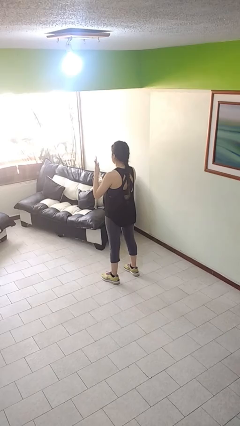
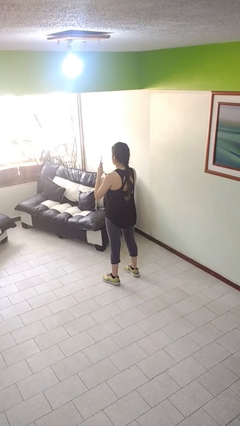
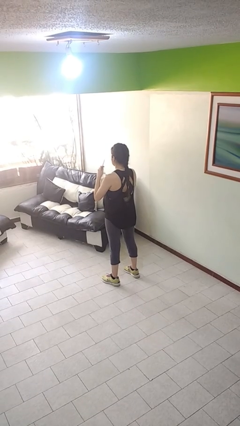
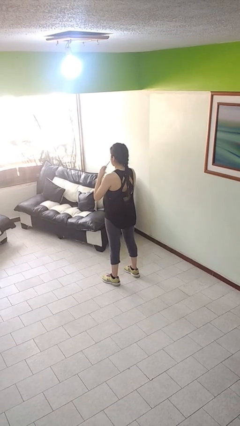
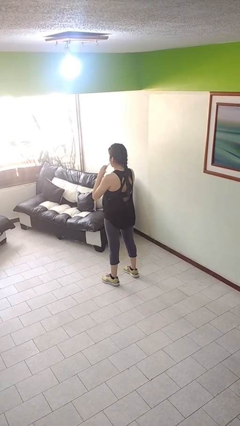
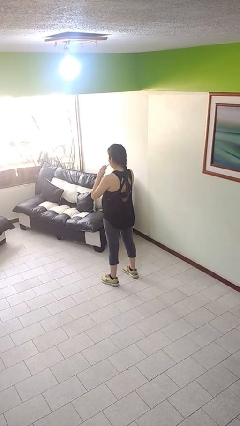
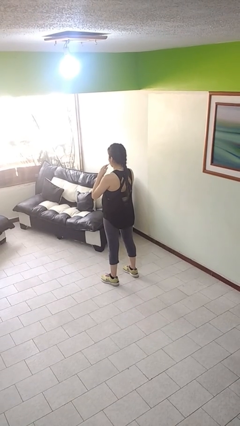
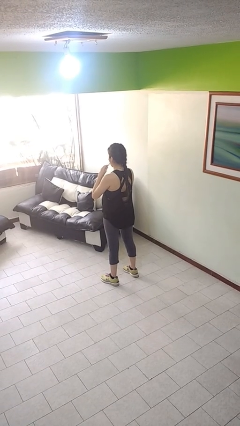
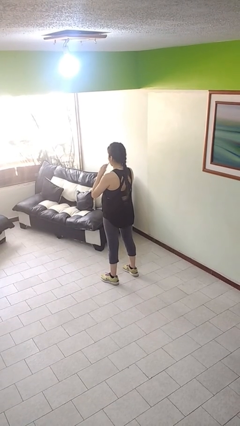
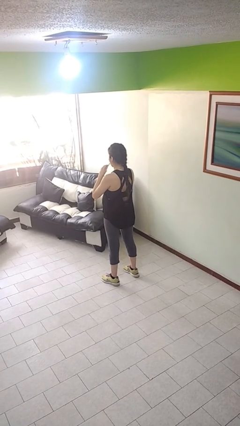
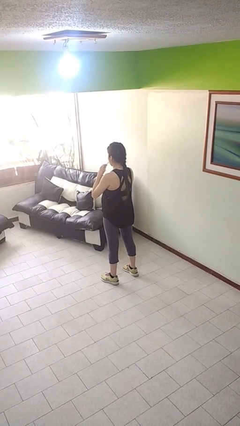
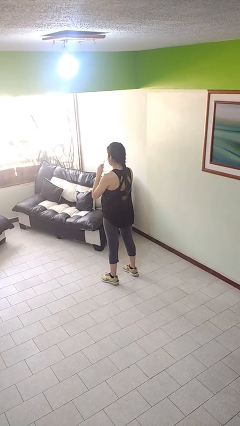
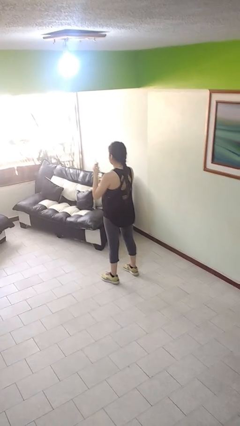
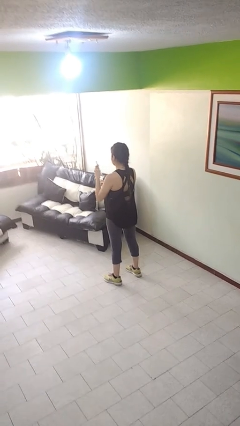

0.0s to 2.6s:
person drinks from straw

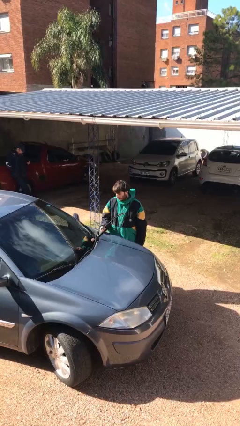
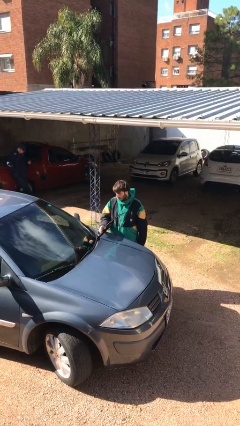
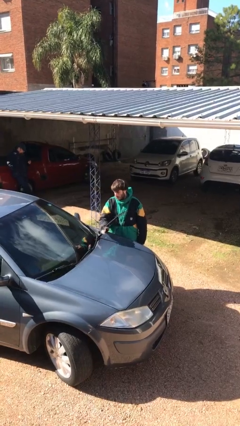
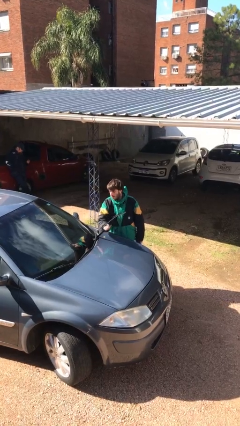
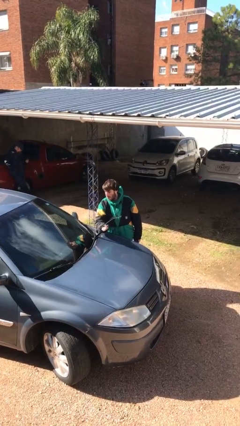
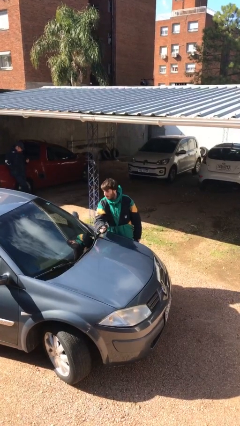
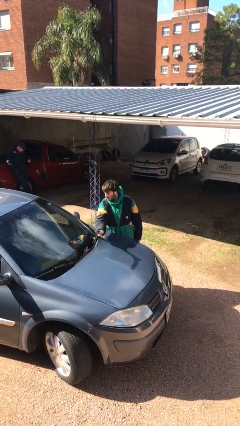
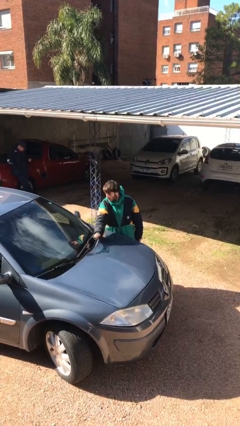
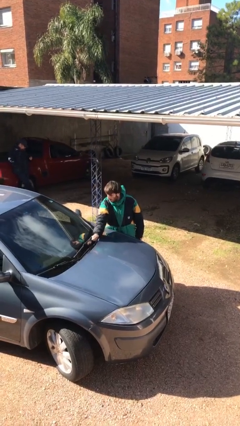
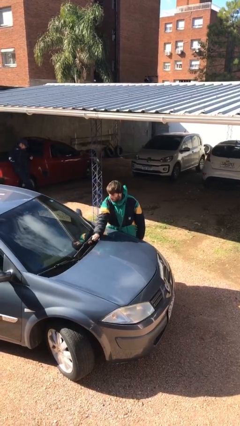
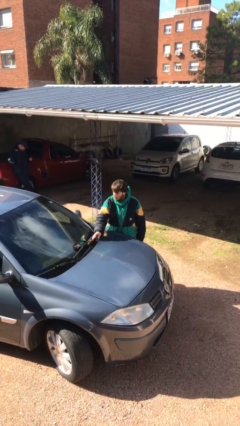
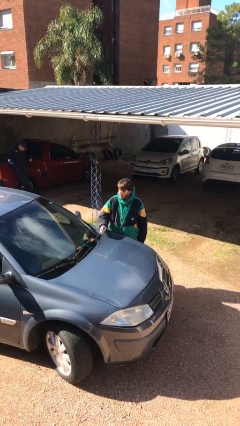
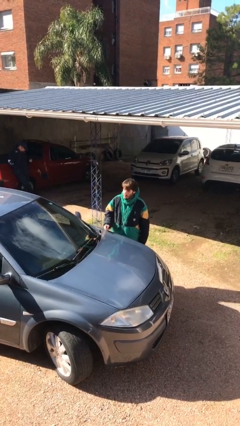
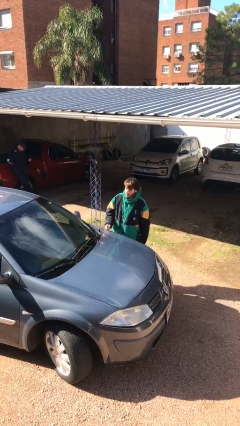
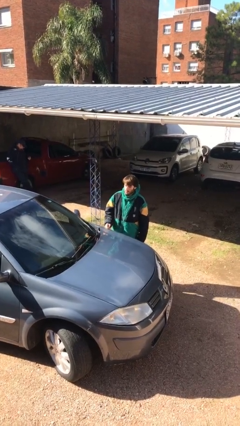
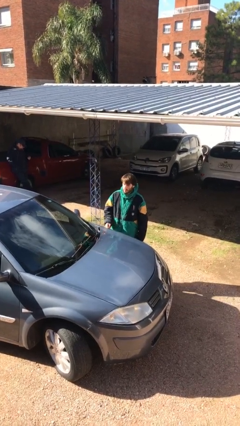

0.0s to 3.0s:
person flips down car wipers

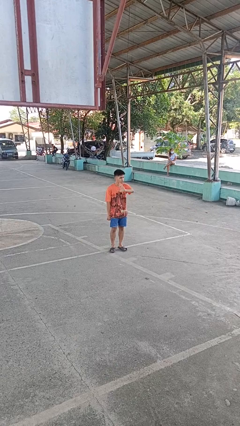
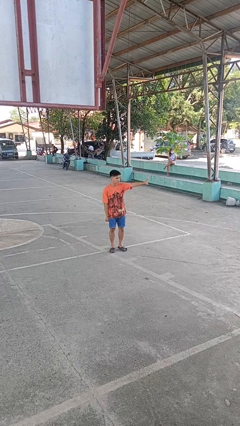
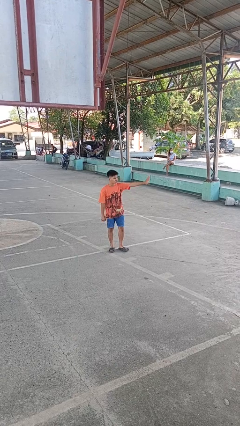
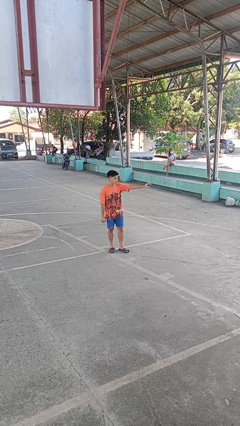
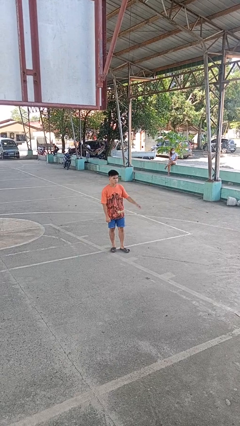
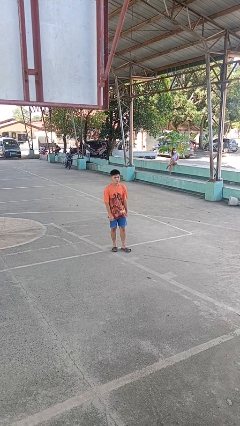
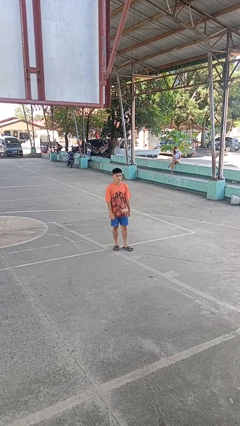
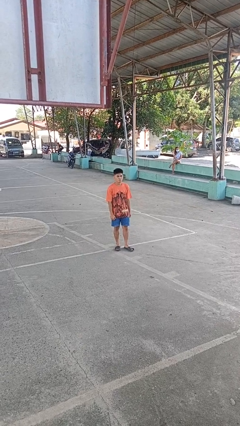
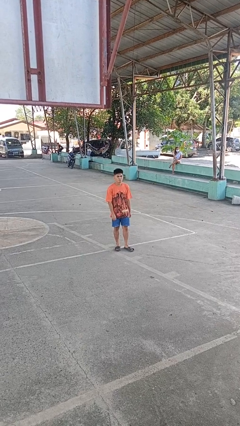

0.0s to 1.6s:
person gestures swipe left

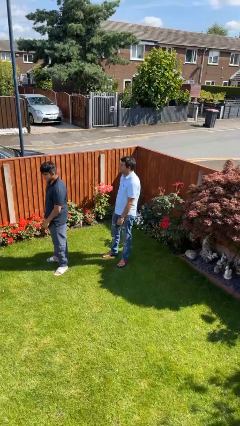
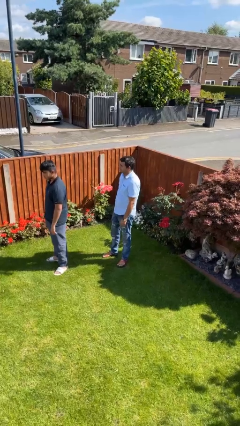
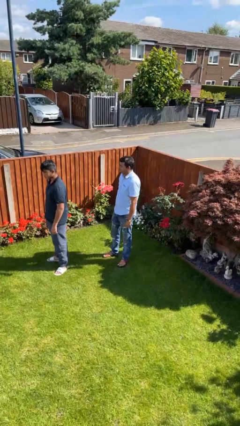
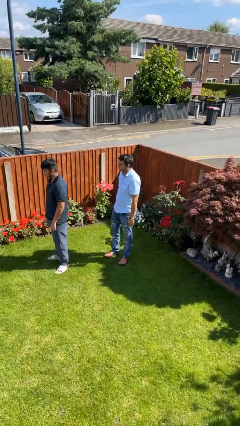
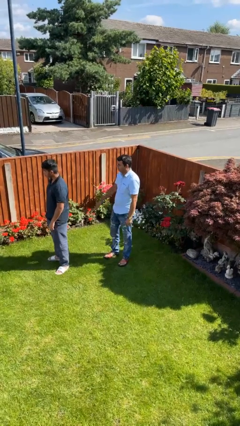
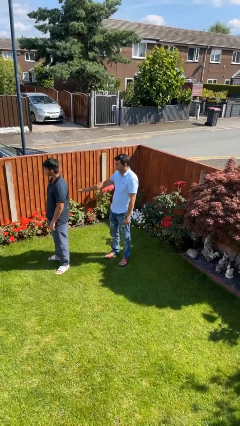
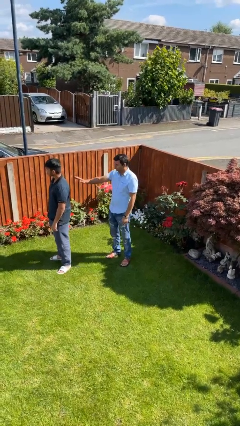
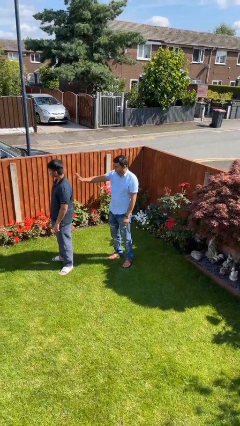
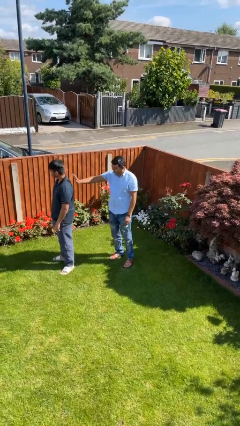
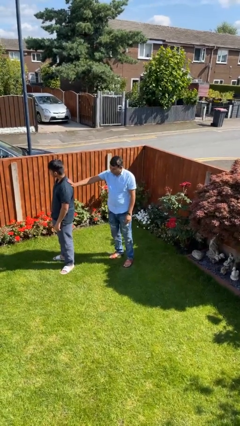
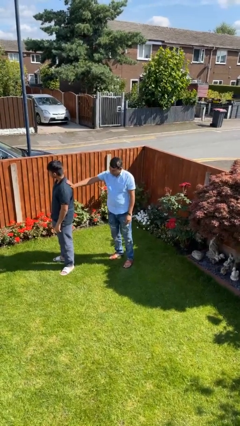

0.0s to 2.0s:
person touches back of person

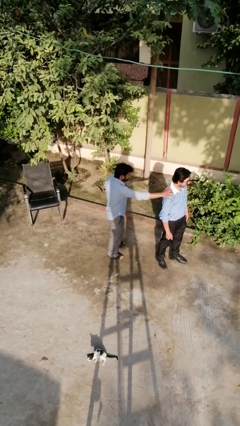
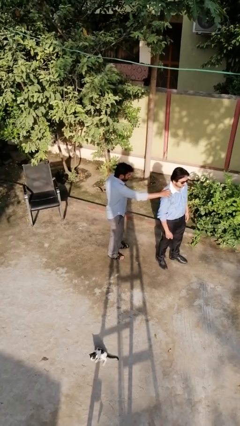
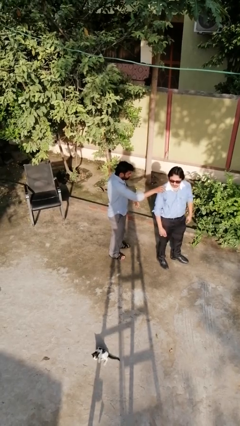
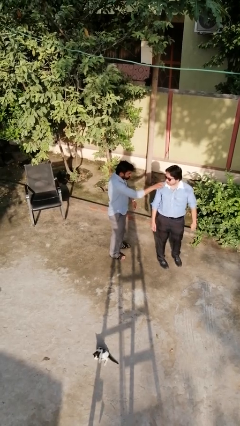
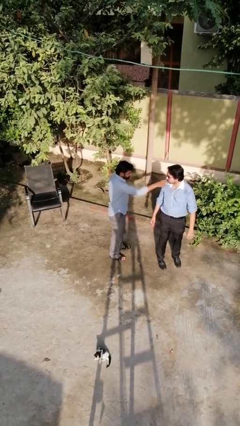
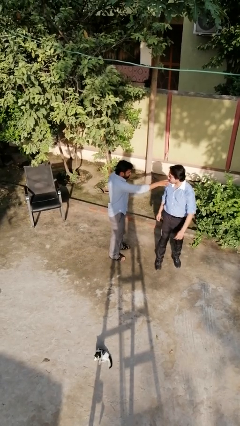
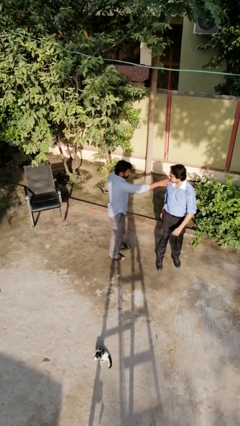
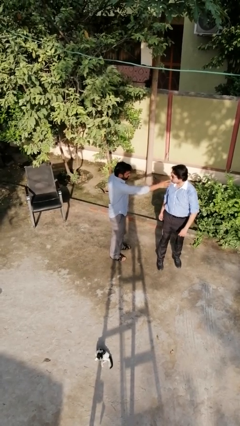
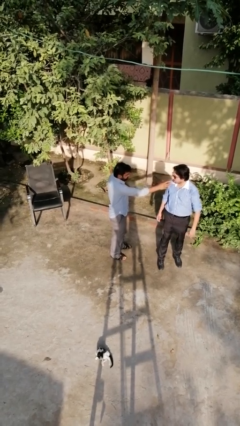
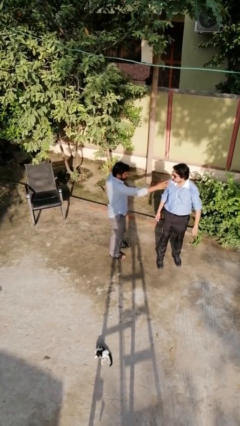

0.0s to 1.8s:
person spins person around

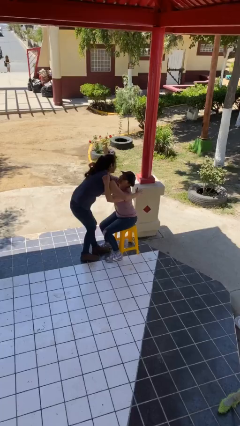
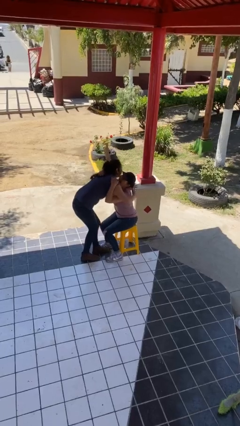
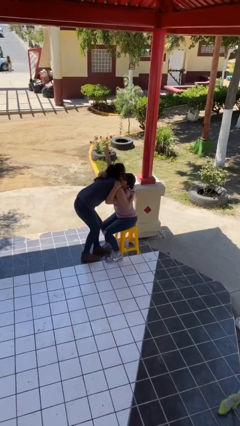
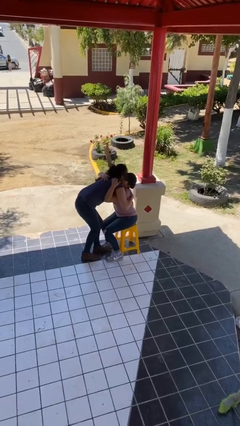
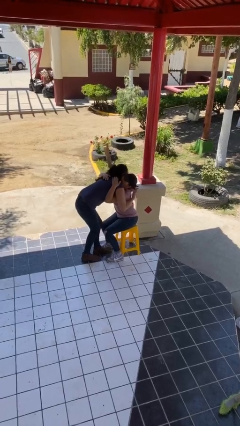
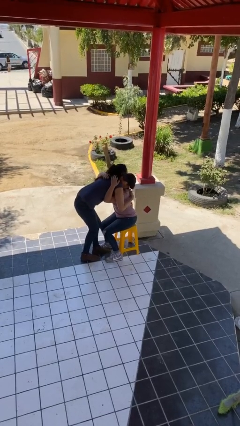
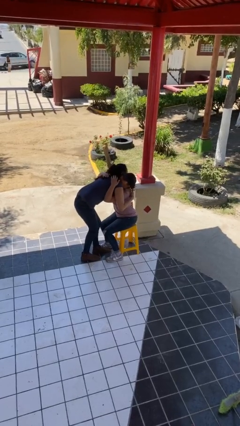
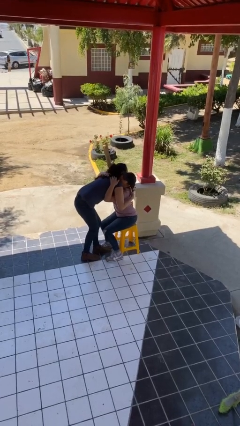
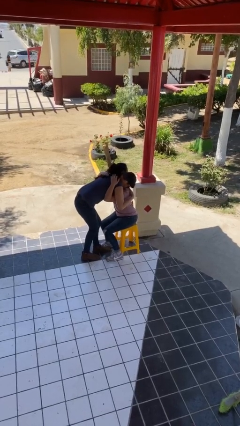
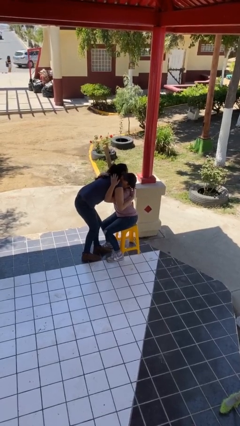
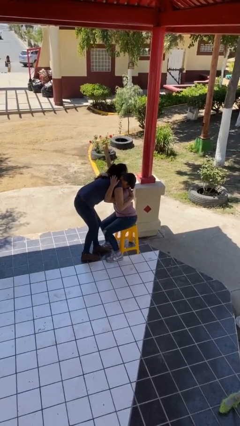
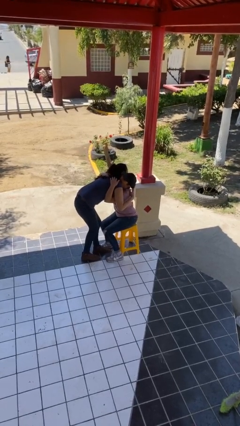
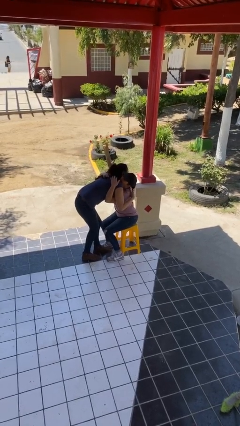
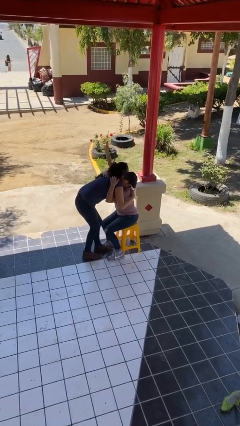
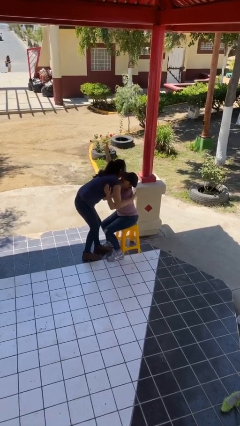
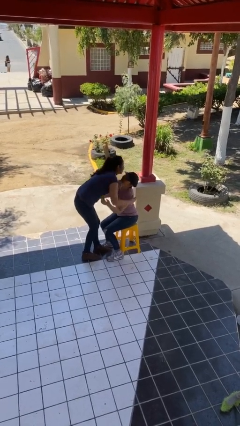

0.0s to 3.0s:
person embraces person

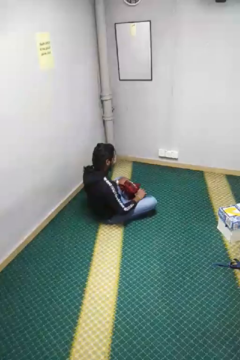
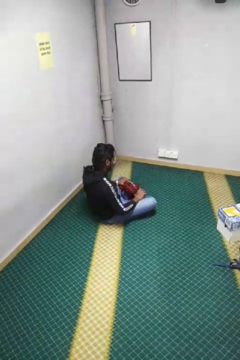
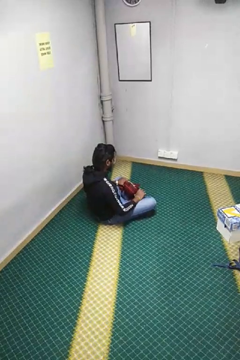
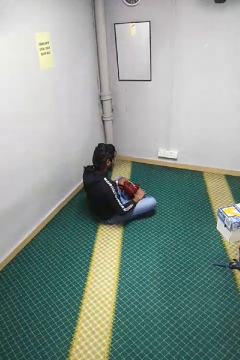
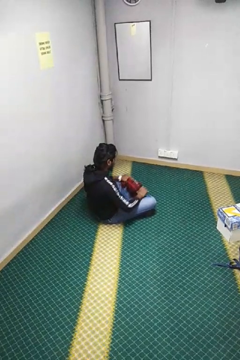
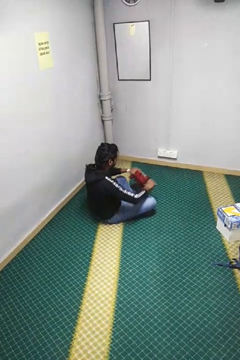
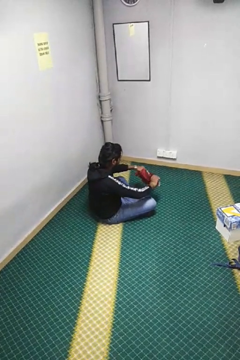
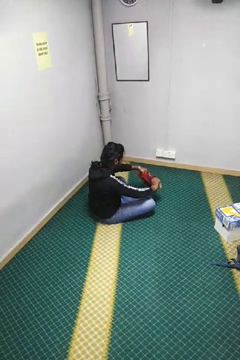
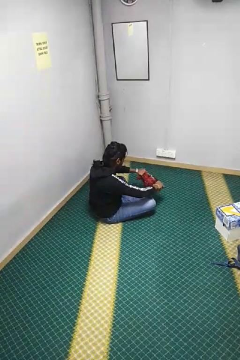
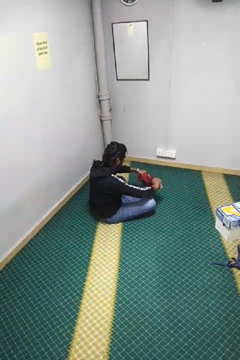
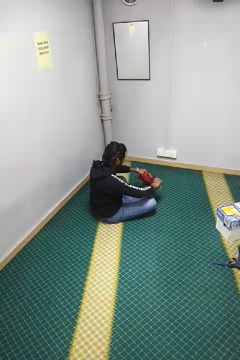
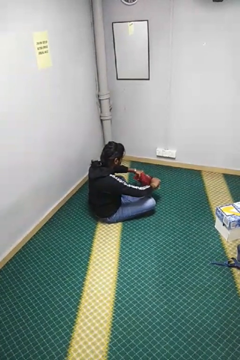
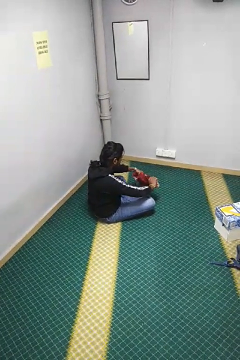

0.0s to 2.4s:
person squeezes object

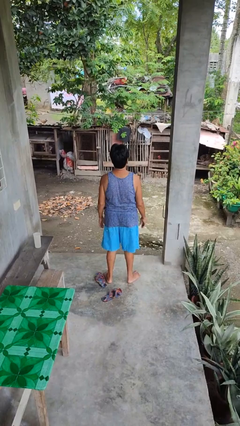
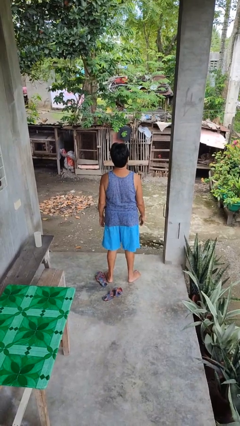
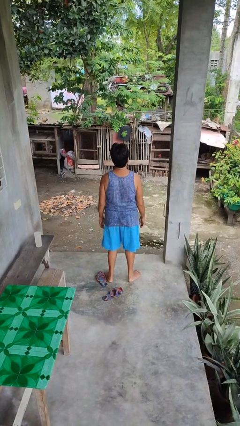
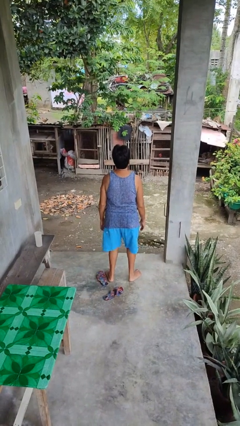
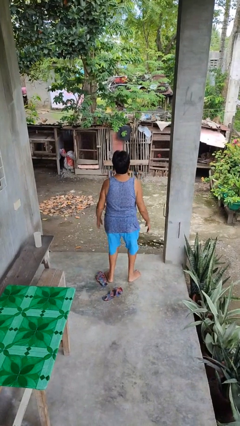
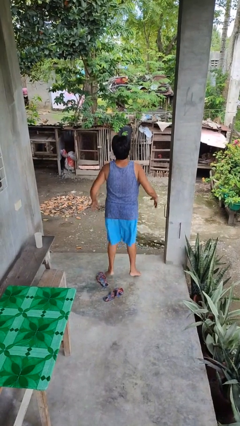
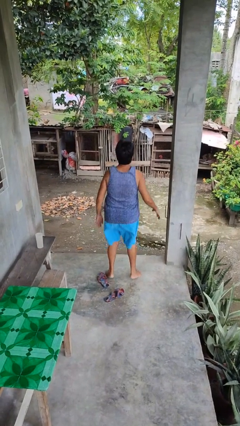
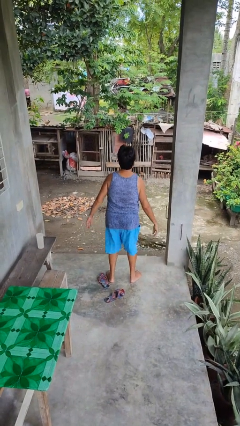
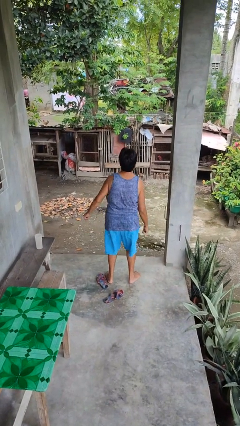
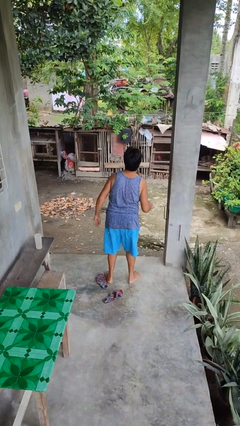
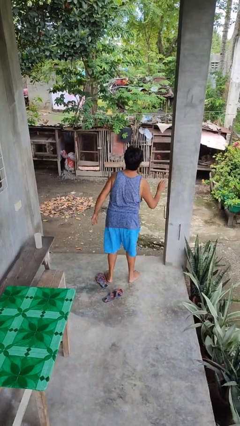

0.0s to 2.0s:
person jumps
